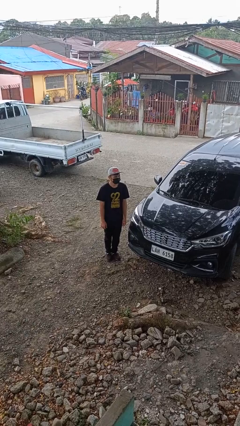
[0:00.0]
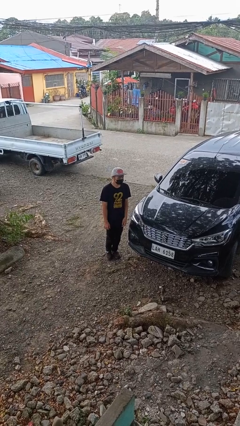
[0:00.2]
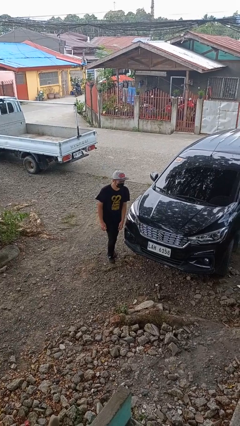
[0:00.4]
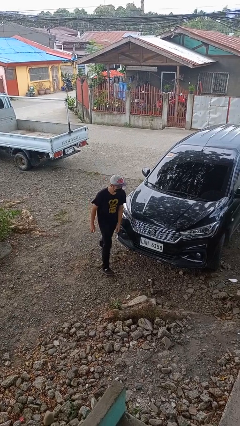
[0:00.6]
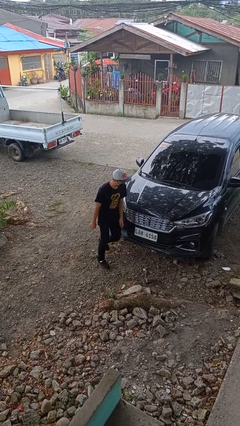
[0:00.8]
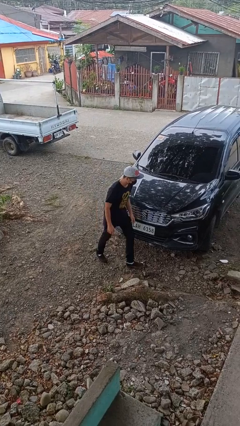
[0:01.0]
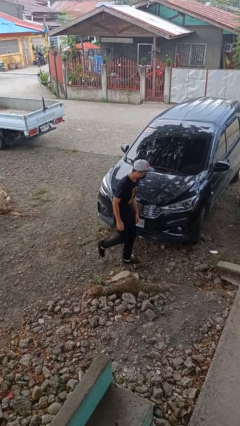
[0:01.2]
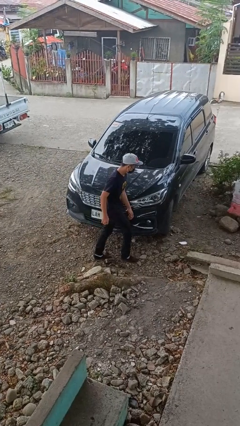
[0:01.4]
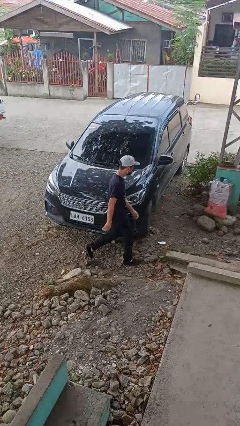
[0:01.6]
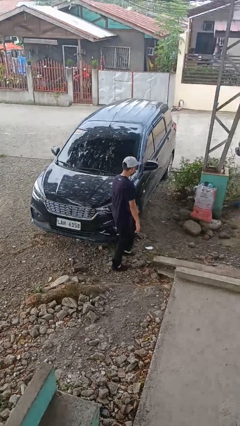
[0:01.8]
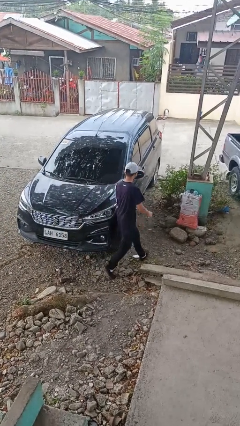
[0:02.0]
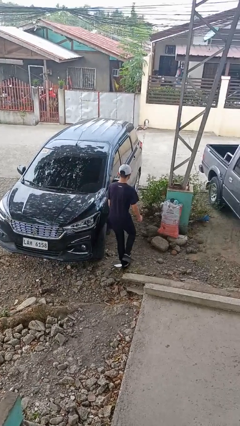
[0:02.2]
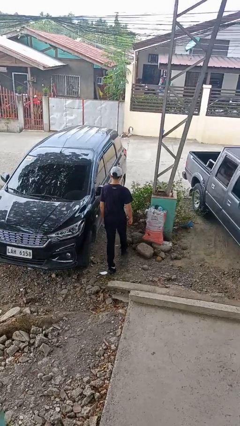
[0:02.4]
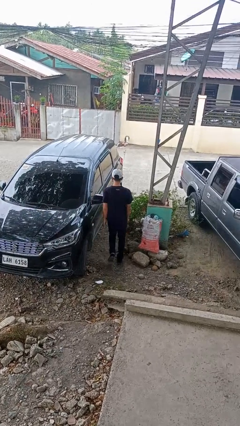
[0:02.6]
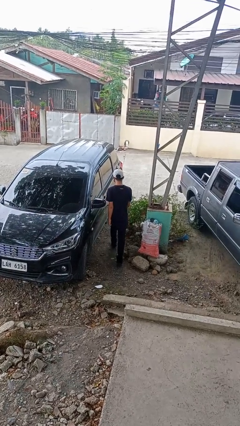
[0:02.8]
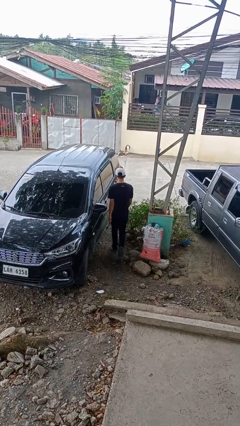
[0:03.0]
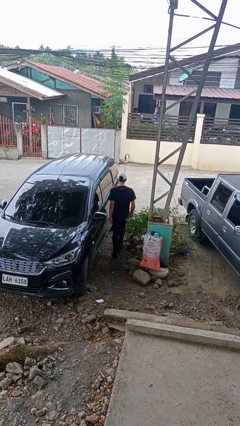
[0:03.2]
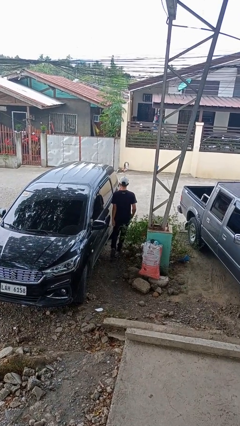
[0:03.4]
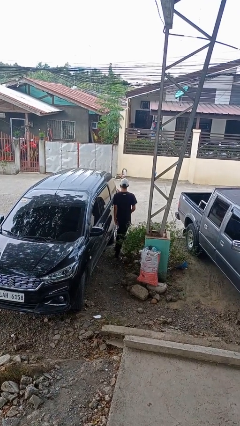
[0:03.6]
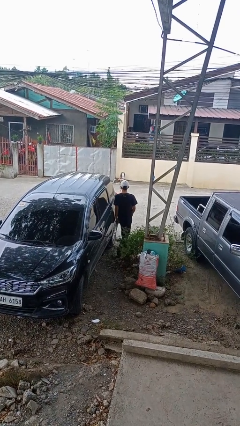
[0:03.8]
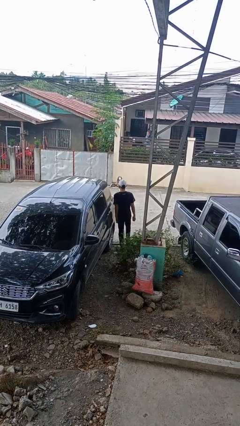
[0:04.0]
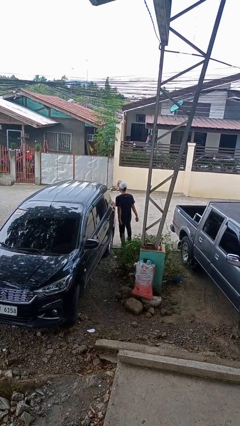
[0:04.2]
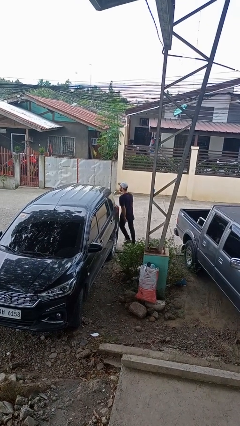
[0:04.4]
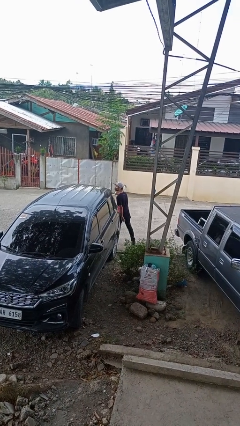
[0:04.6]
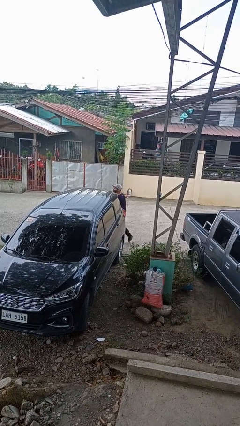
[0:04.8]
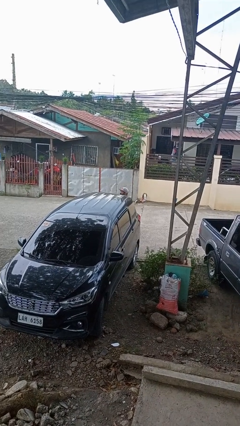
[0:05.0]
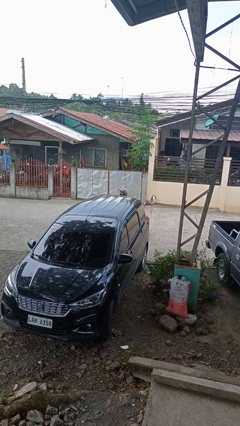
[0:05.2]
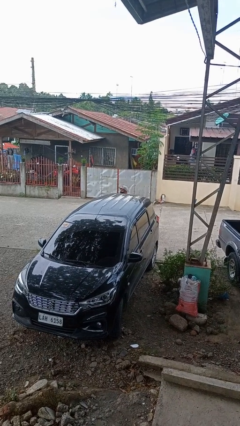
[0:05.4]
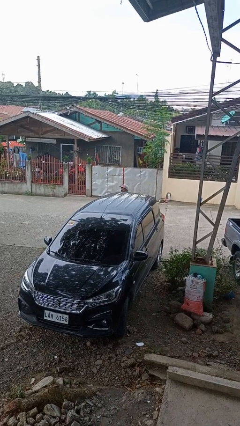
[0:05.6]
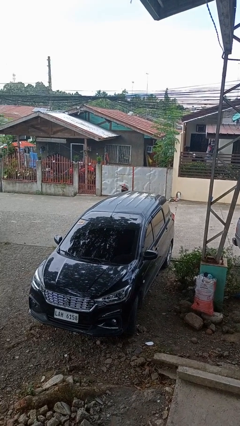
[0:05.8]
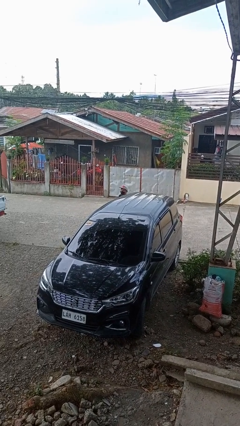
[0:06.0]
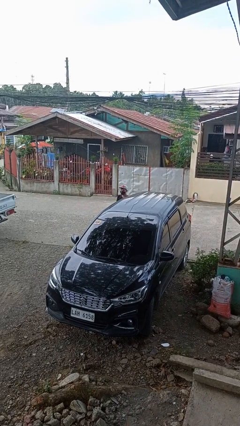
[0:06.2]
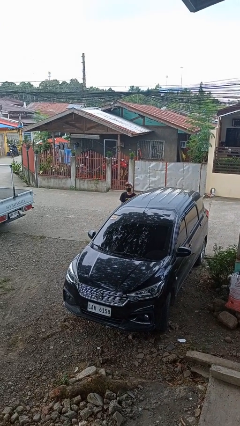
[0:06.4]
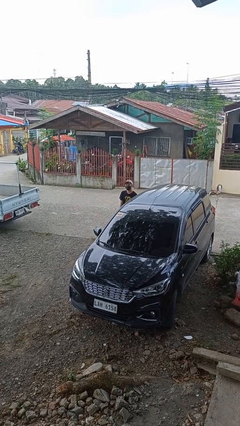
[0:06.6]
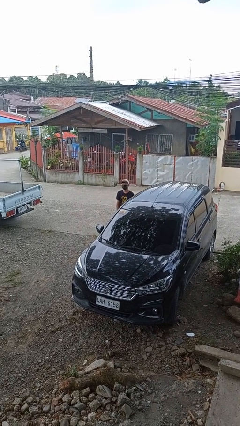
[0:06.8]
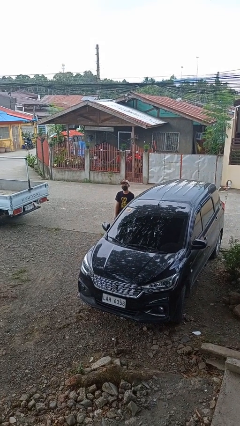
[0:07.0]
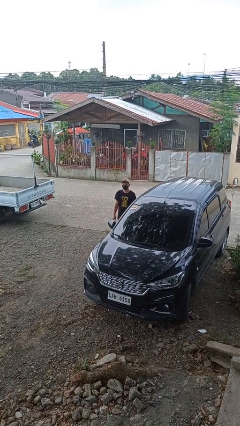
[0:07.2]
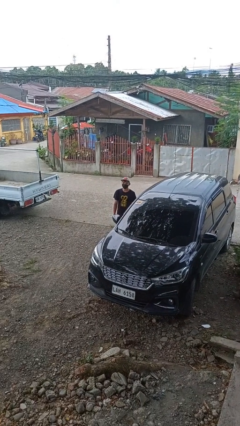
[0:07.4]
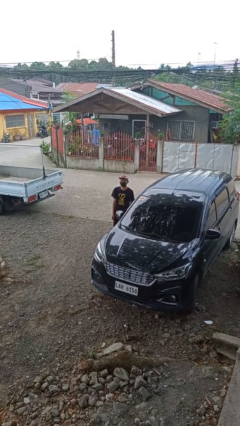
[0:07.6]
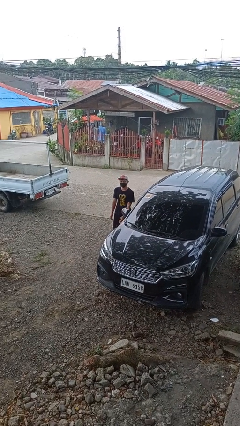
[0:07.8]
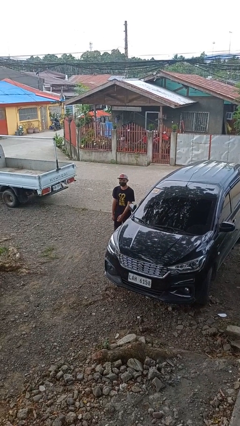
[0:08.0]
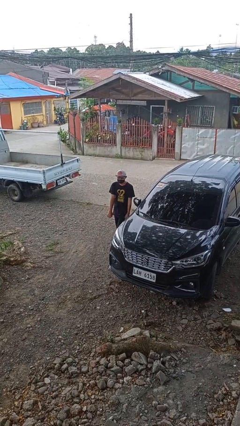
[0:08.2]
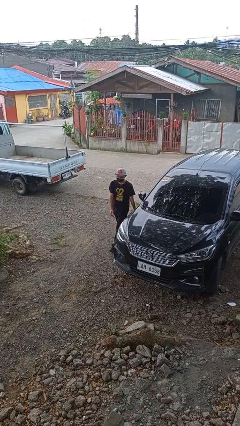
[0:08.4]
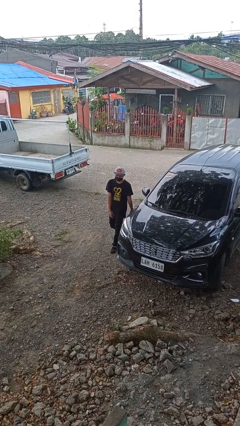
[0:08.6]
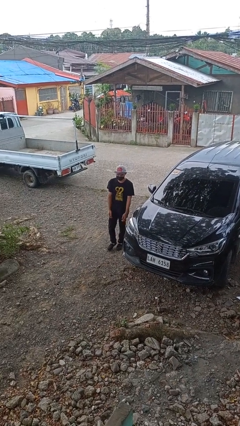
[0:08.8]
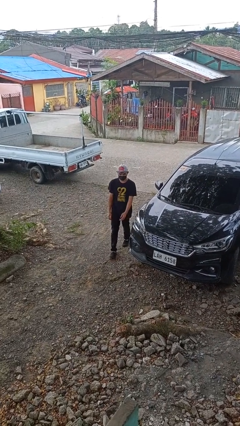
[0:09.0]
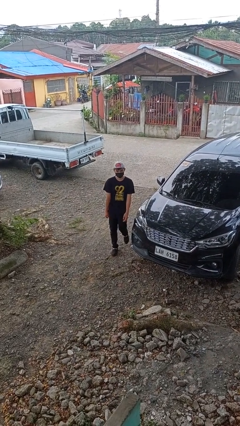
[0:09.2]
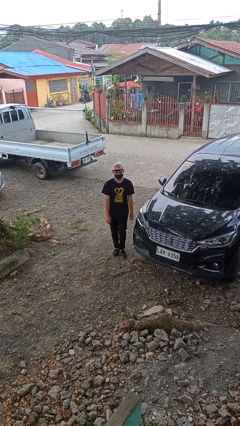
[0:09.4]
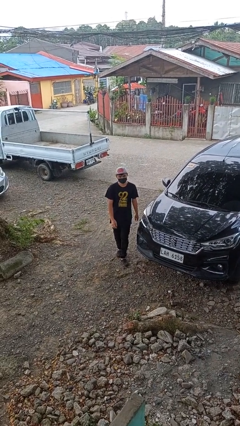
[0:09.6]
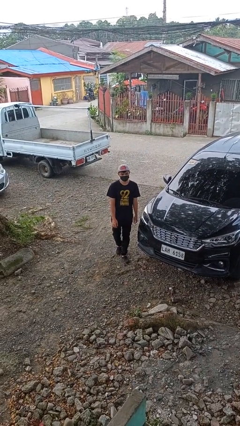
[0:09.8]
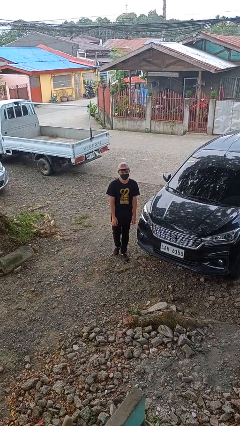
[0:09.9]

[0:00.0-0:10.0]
person walks around car

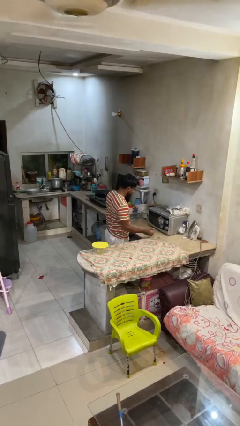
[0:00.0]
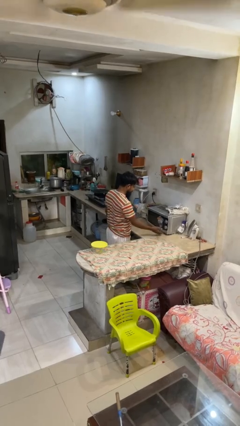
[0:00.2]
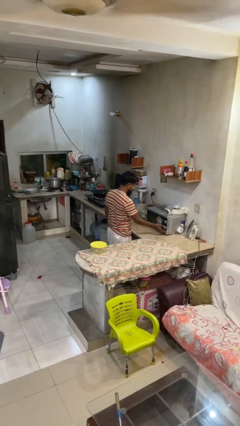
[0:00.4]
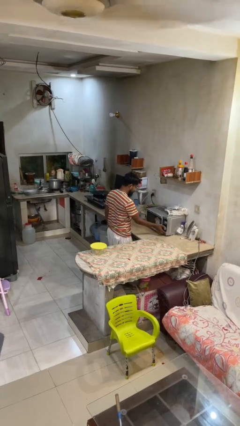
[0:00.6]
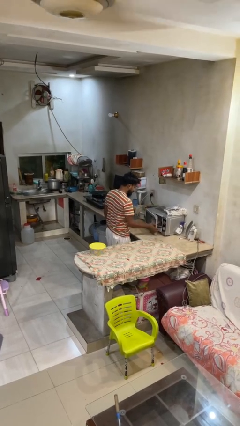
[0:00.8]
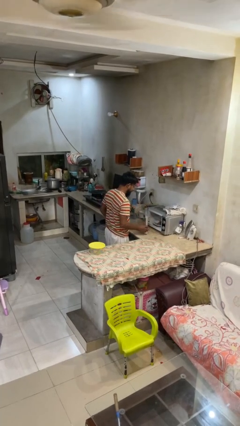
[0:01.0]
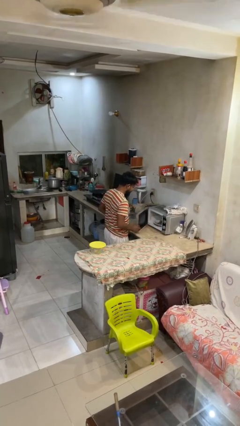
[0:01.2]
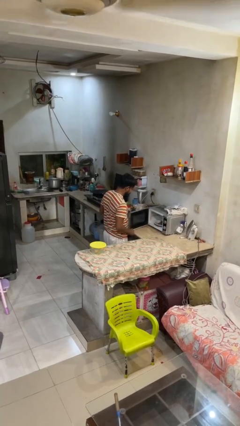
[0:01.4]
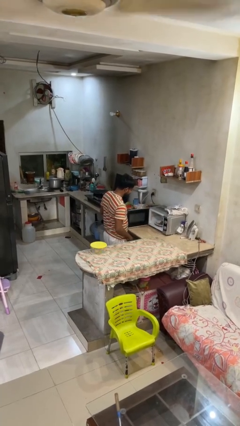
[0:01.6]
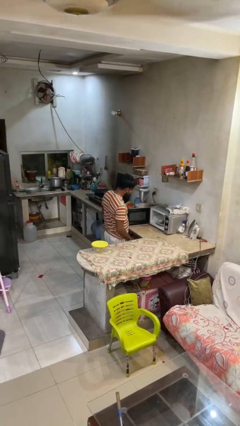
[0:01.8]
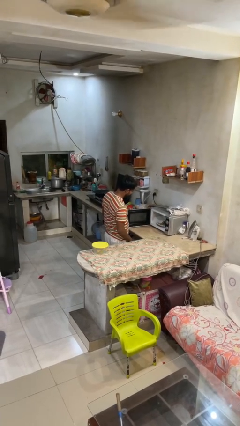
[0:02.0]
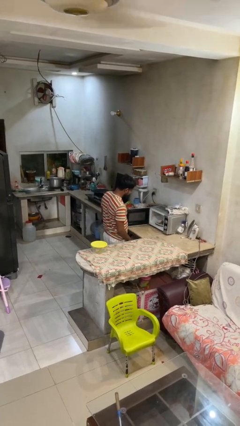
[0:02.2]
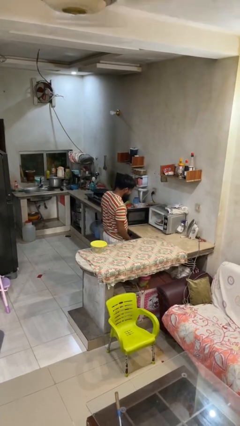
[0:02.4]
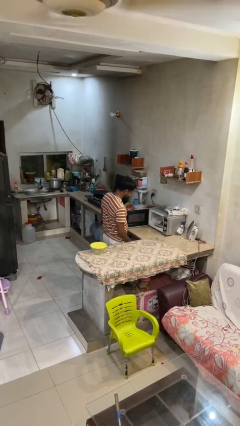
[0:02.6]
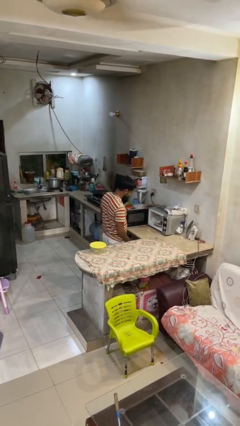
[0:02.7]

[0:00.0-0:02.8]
person opens microwave

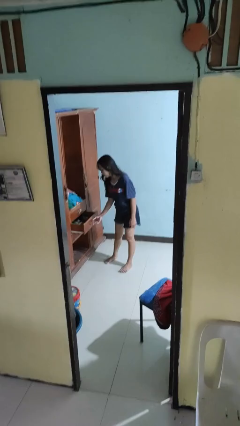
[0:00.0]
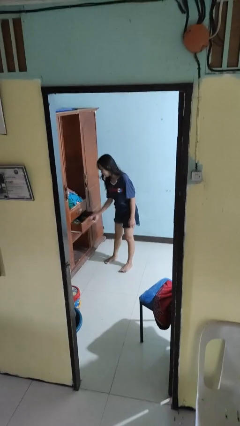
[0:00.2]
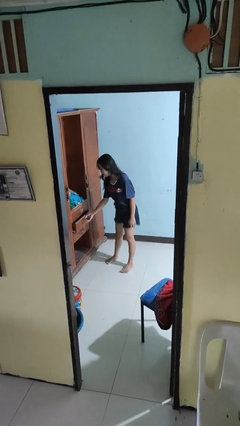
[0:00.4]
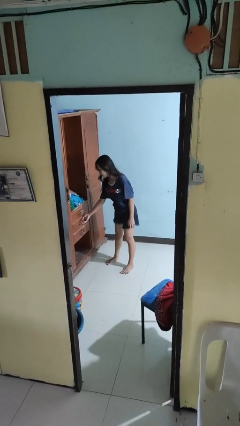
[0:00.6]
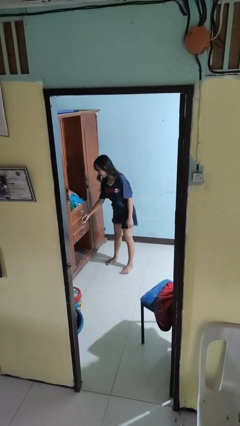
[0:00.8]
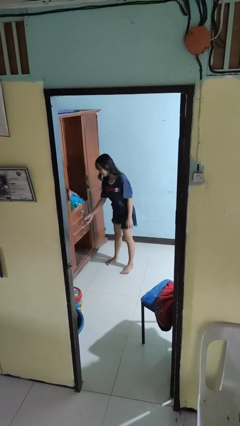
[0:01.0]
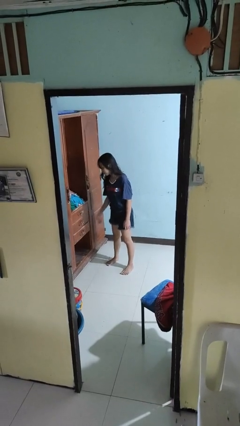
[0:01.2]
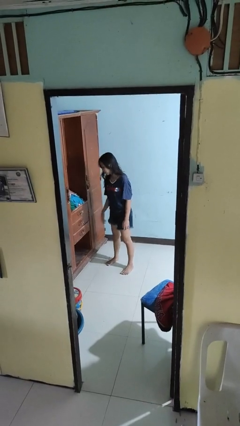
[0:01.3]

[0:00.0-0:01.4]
person closes dresser drawer

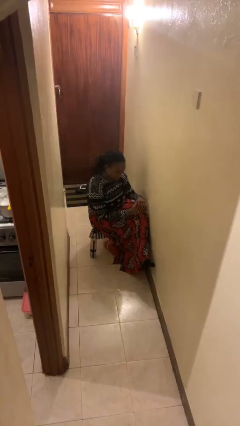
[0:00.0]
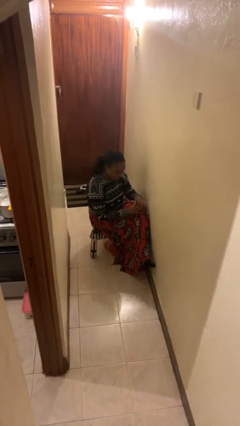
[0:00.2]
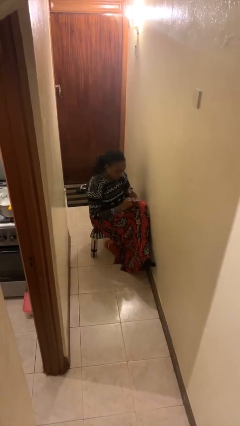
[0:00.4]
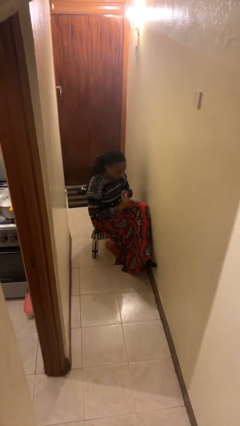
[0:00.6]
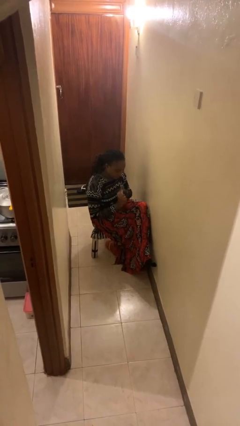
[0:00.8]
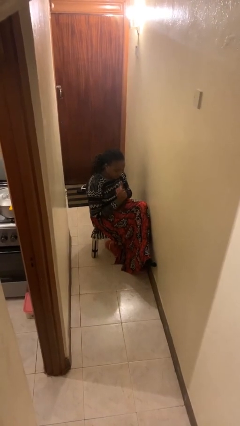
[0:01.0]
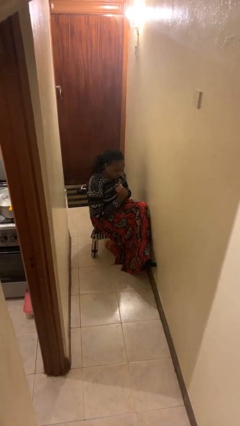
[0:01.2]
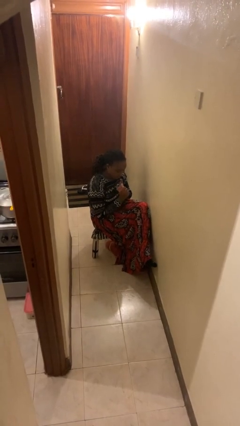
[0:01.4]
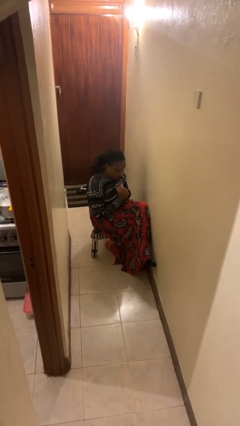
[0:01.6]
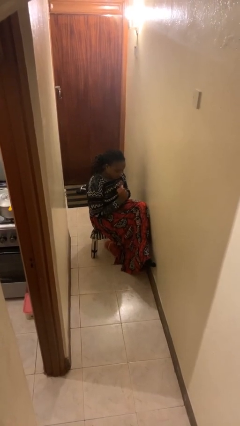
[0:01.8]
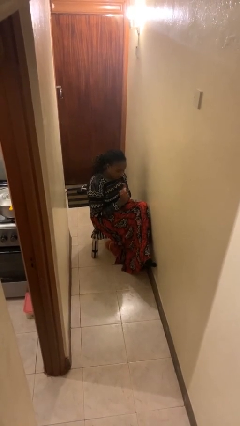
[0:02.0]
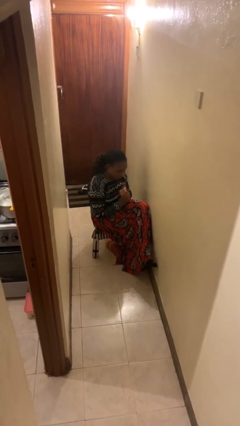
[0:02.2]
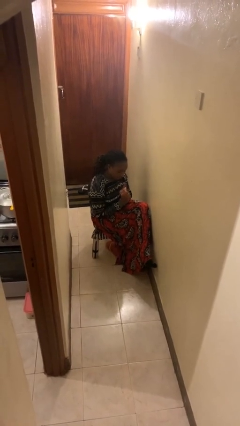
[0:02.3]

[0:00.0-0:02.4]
person cracks knuckles

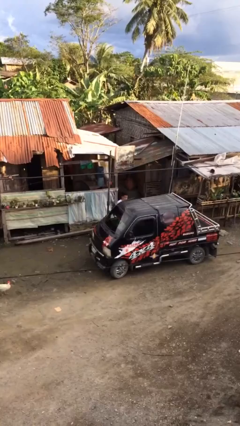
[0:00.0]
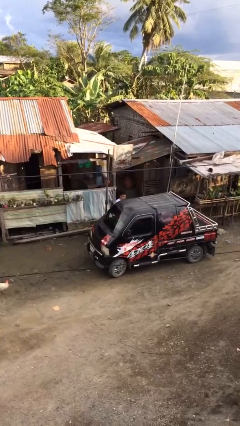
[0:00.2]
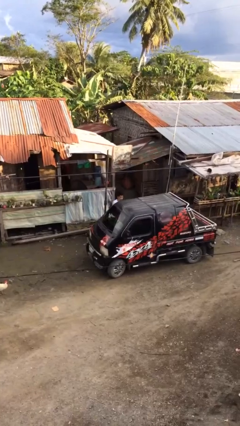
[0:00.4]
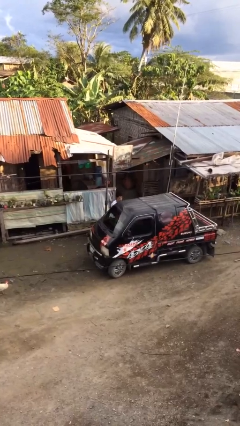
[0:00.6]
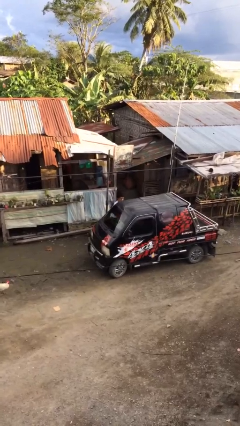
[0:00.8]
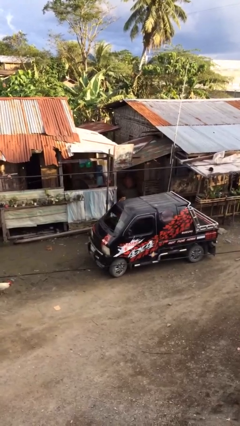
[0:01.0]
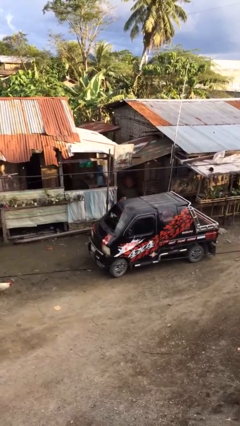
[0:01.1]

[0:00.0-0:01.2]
person closes car door
